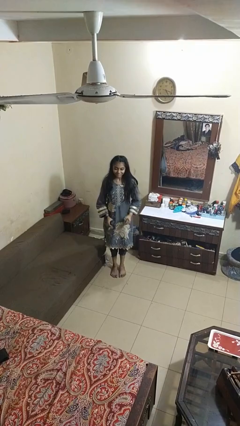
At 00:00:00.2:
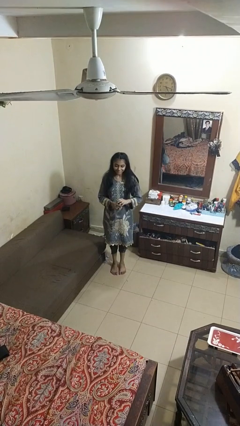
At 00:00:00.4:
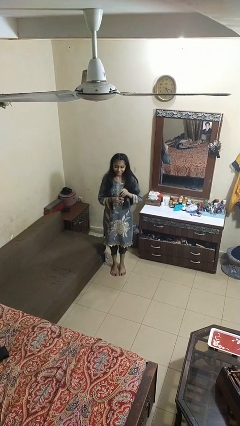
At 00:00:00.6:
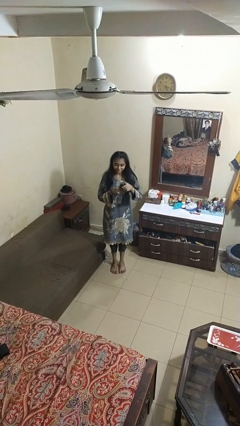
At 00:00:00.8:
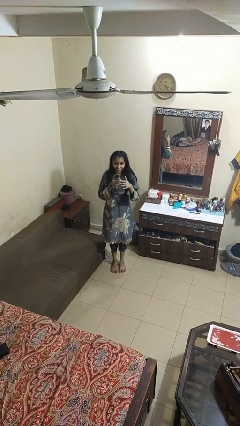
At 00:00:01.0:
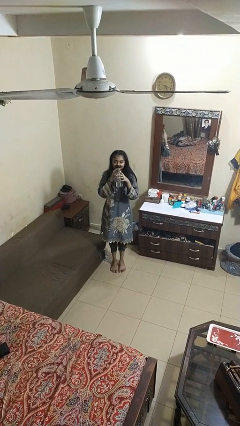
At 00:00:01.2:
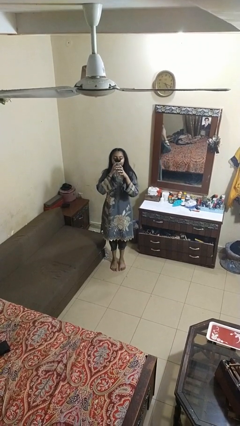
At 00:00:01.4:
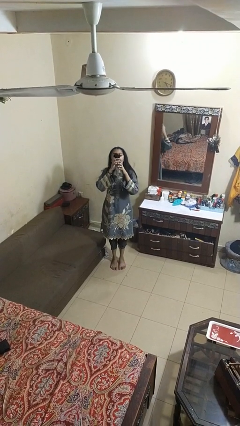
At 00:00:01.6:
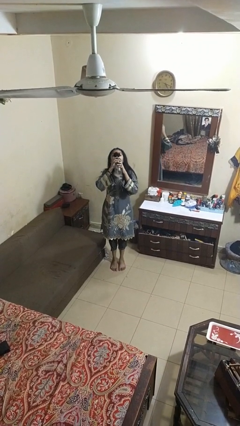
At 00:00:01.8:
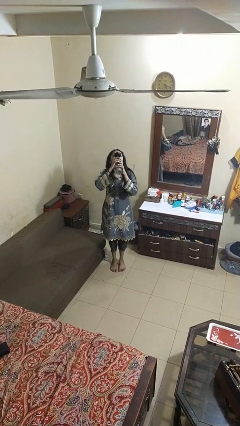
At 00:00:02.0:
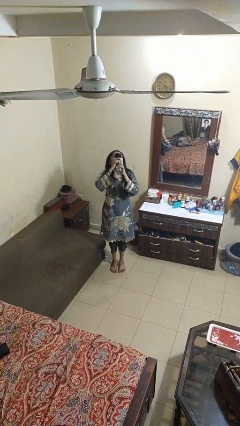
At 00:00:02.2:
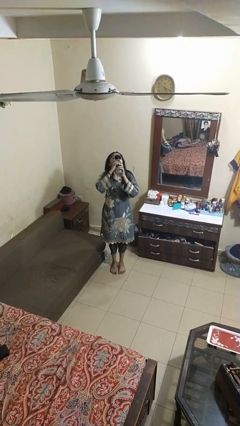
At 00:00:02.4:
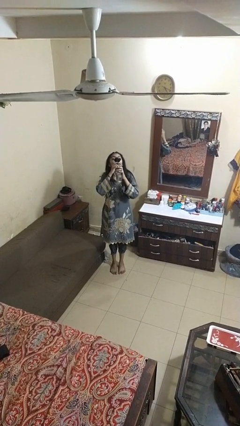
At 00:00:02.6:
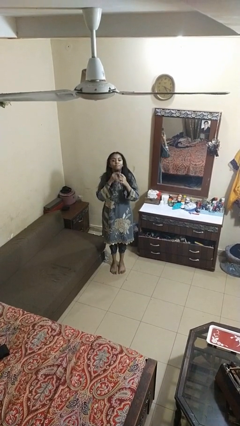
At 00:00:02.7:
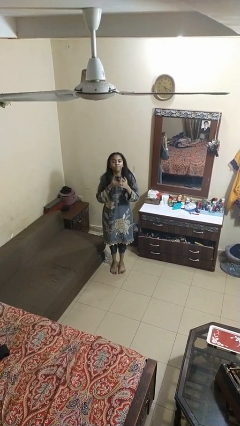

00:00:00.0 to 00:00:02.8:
person drinks from bottle

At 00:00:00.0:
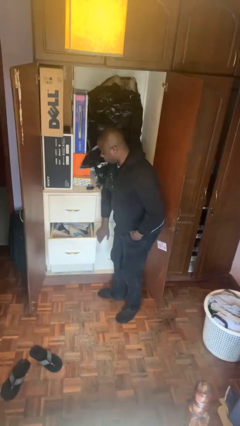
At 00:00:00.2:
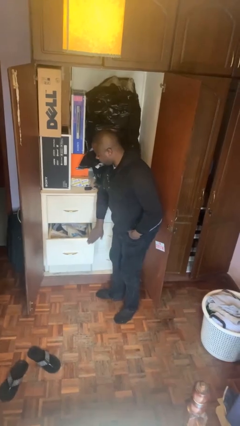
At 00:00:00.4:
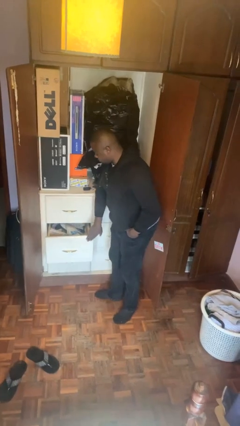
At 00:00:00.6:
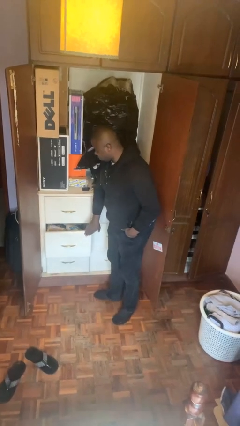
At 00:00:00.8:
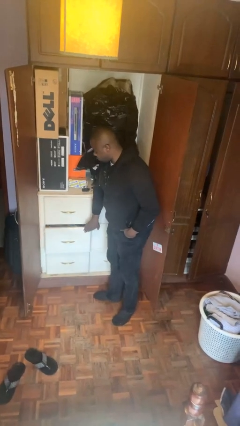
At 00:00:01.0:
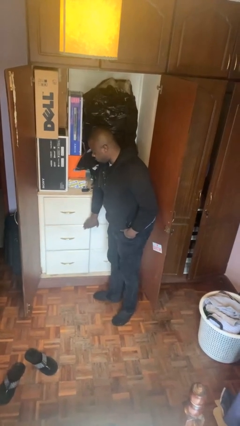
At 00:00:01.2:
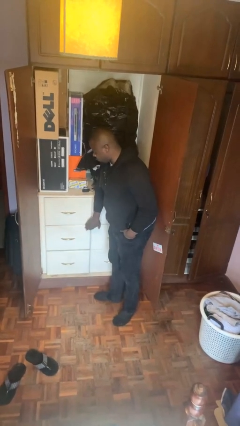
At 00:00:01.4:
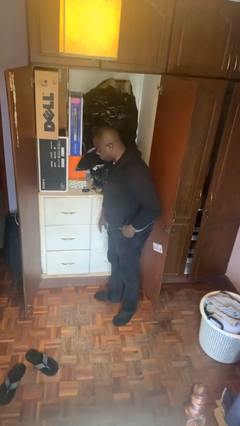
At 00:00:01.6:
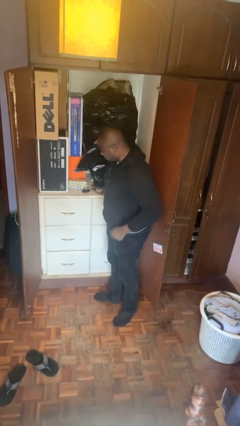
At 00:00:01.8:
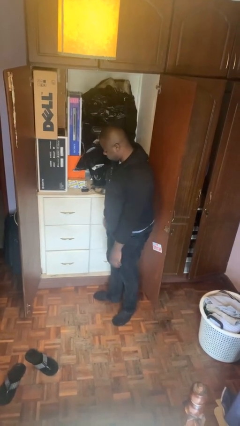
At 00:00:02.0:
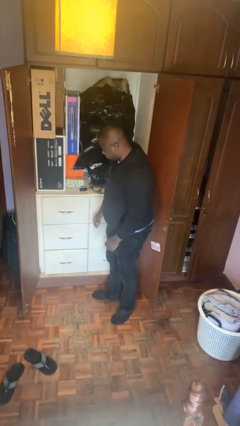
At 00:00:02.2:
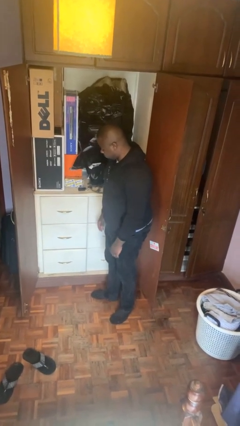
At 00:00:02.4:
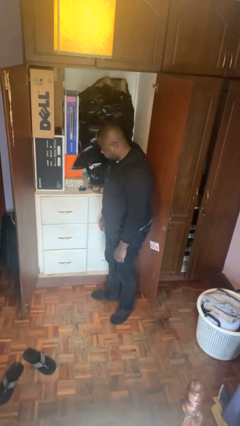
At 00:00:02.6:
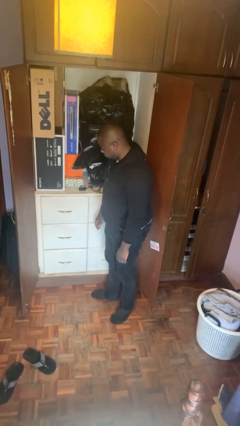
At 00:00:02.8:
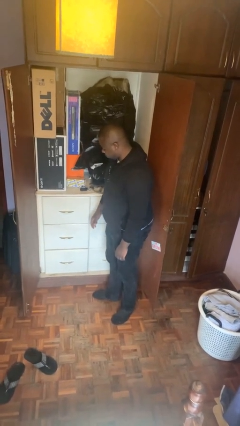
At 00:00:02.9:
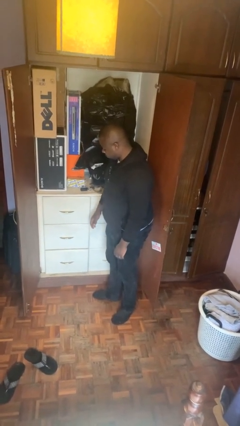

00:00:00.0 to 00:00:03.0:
person closes dresser drawer

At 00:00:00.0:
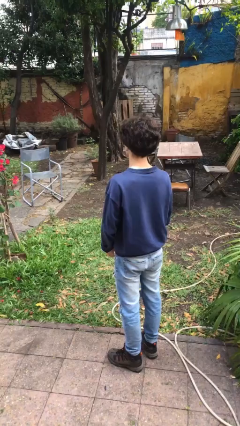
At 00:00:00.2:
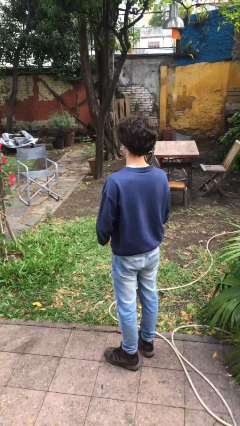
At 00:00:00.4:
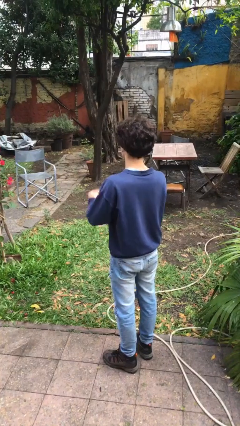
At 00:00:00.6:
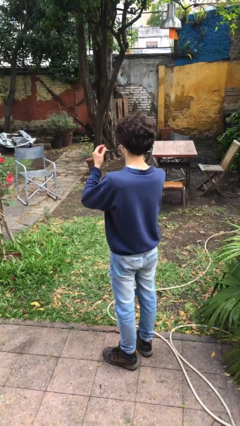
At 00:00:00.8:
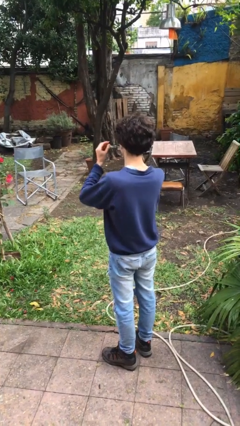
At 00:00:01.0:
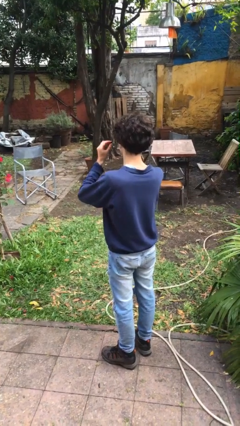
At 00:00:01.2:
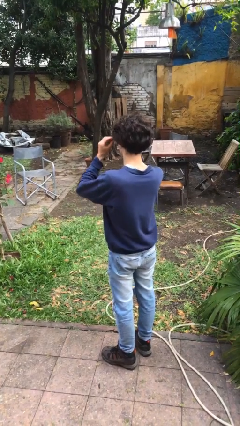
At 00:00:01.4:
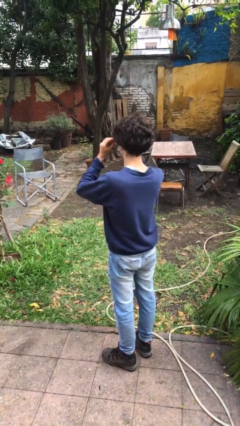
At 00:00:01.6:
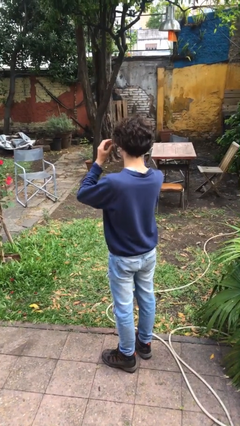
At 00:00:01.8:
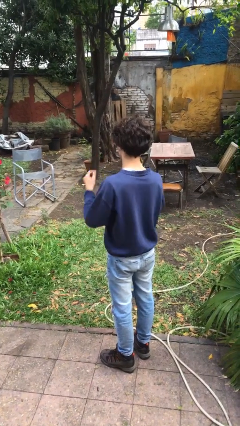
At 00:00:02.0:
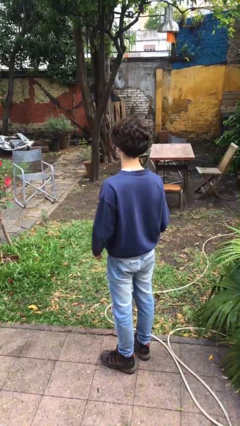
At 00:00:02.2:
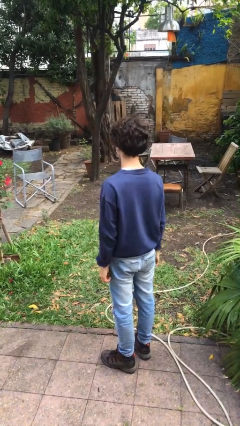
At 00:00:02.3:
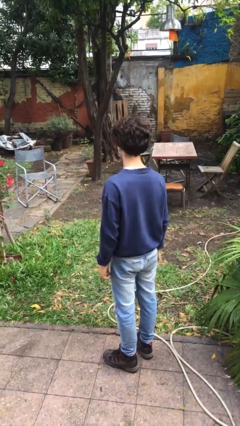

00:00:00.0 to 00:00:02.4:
person puts on glasses

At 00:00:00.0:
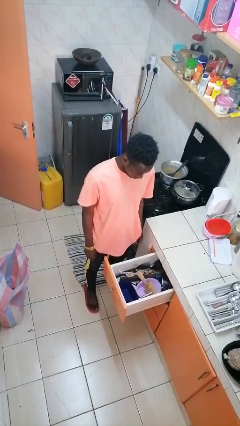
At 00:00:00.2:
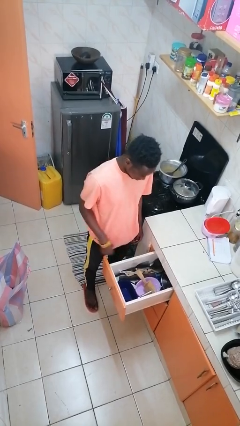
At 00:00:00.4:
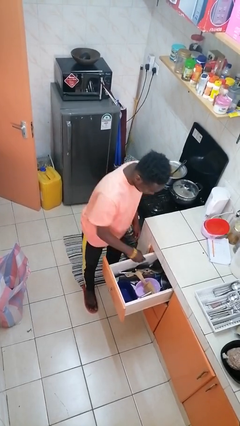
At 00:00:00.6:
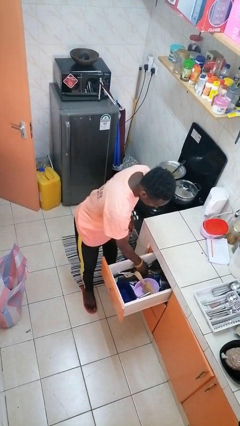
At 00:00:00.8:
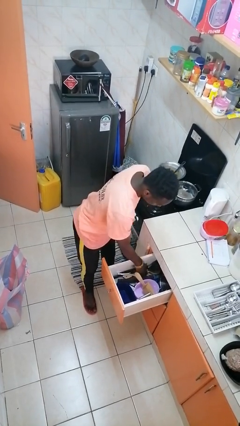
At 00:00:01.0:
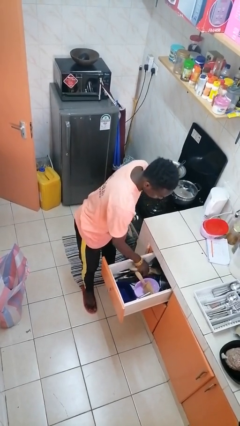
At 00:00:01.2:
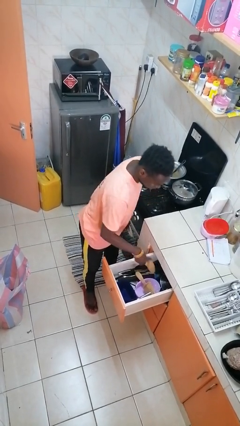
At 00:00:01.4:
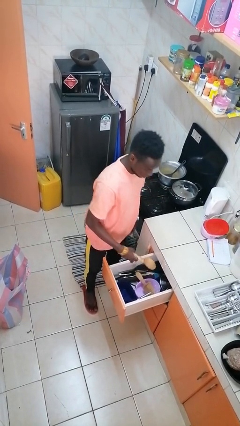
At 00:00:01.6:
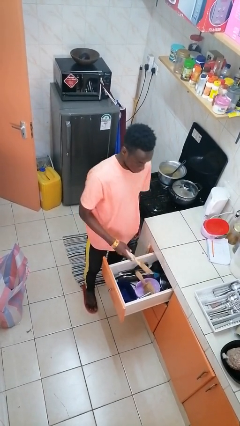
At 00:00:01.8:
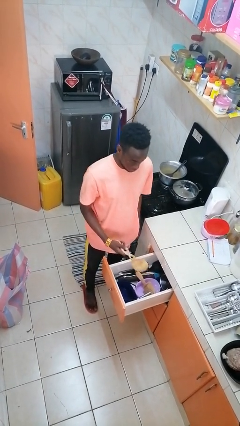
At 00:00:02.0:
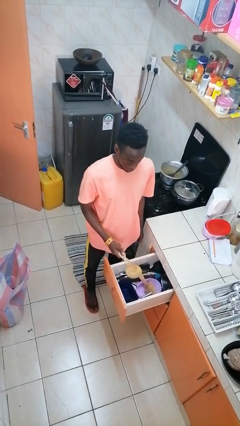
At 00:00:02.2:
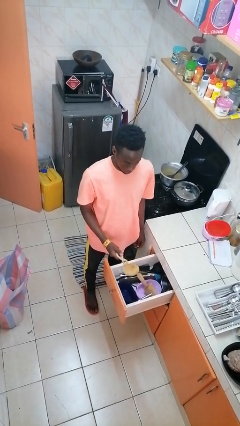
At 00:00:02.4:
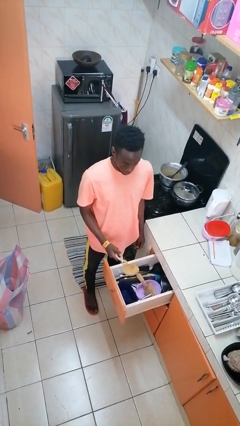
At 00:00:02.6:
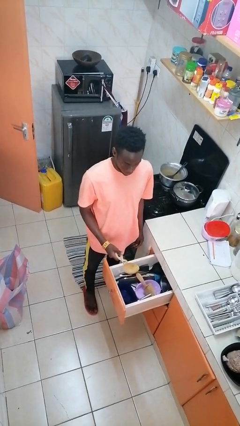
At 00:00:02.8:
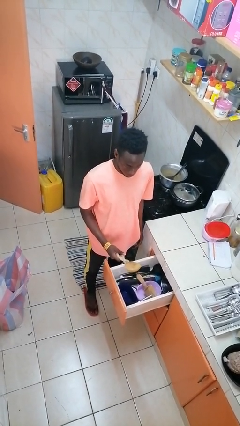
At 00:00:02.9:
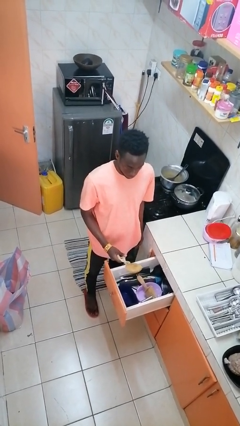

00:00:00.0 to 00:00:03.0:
person takes object from kitchen drawer

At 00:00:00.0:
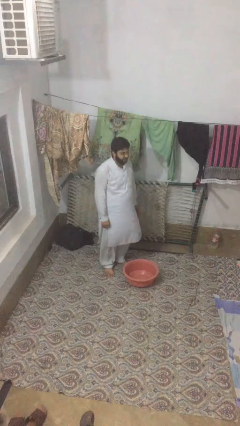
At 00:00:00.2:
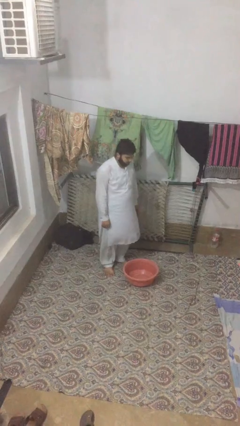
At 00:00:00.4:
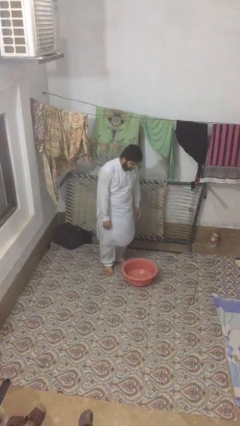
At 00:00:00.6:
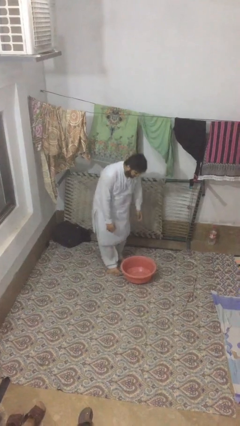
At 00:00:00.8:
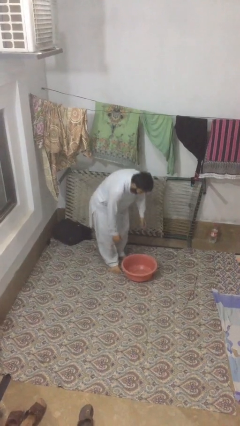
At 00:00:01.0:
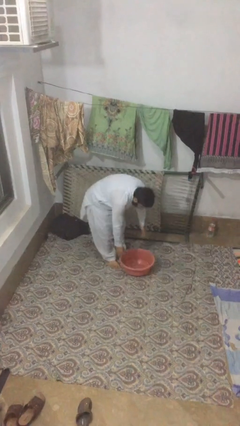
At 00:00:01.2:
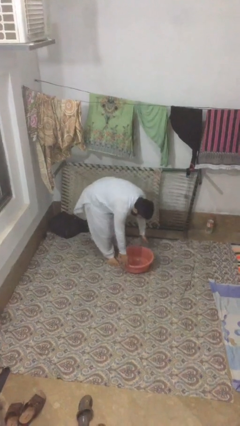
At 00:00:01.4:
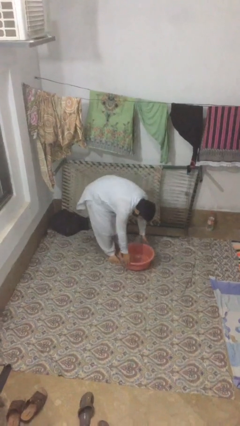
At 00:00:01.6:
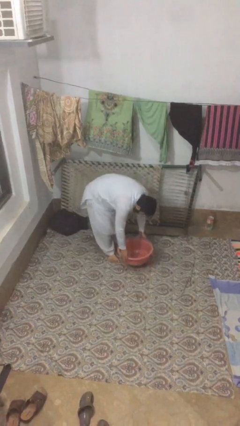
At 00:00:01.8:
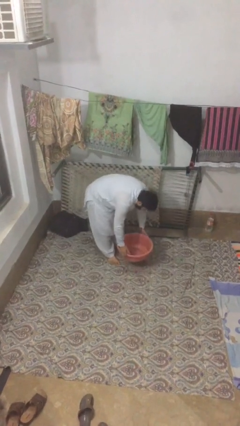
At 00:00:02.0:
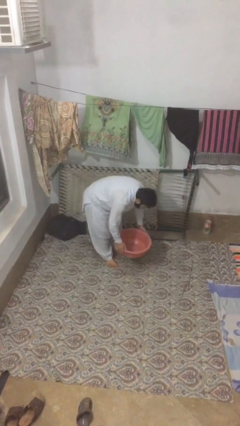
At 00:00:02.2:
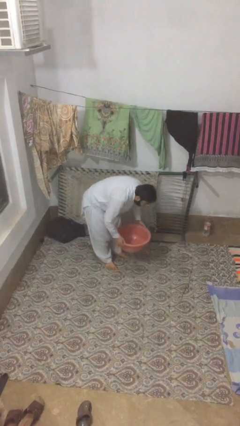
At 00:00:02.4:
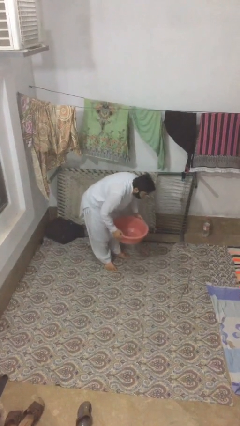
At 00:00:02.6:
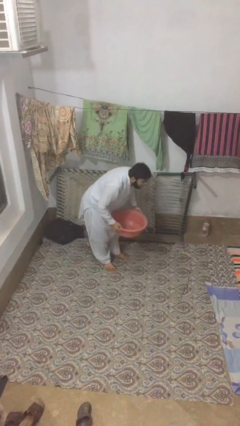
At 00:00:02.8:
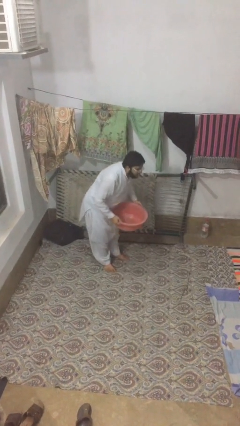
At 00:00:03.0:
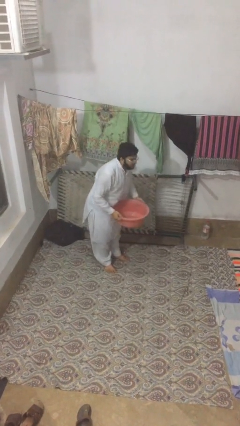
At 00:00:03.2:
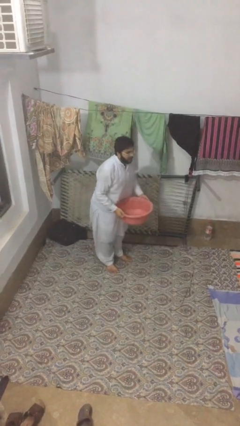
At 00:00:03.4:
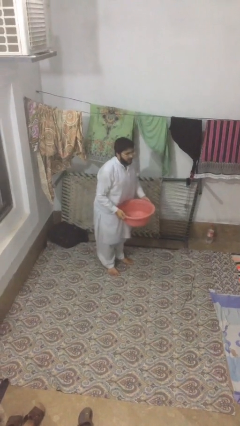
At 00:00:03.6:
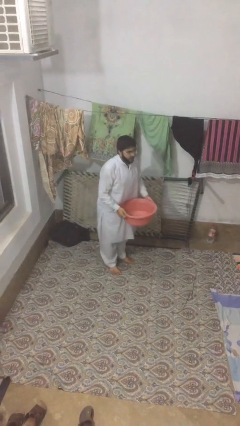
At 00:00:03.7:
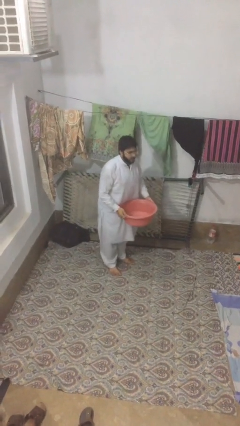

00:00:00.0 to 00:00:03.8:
person picks up object from floor

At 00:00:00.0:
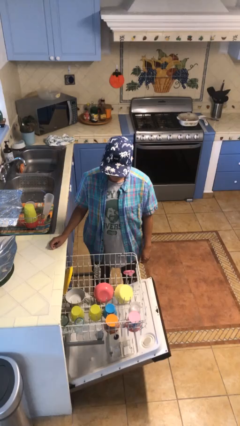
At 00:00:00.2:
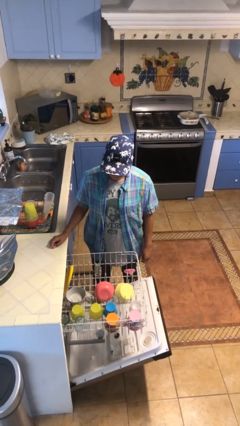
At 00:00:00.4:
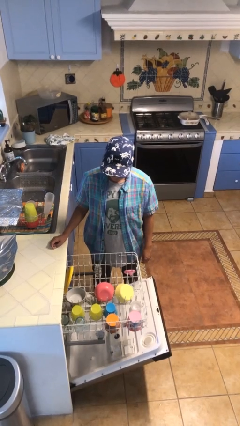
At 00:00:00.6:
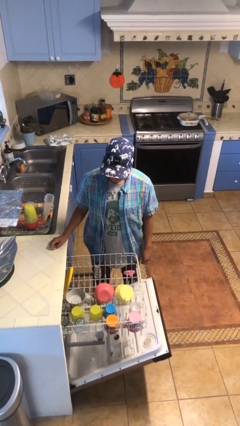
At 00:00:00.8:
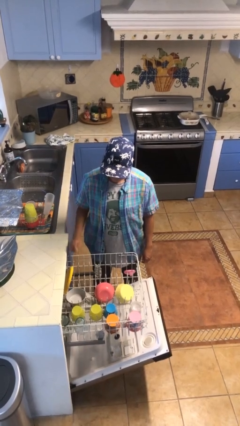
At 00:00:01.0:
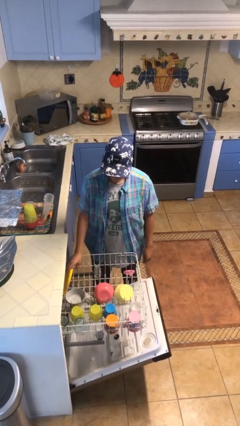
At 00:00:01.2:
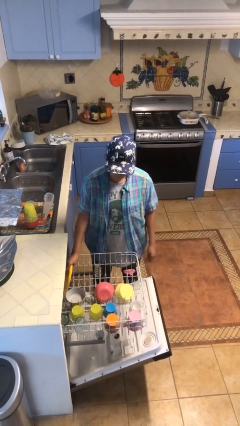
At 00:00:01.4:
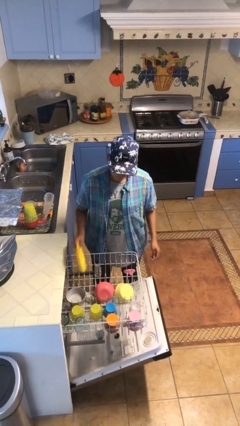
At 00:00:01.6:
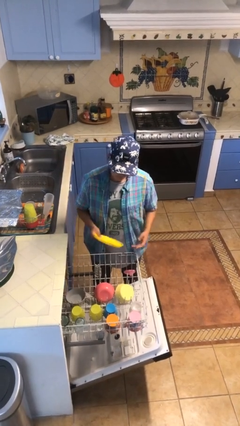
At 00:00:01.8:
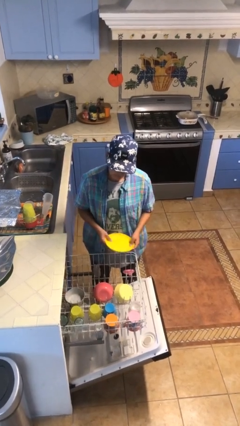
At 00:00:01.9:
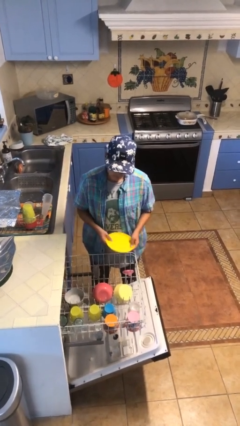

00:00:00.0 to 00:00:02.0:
person unloads dishwasher

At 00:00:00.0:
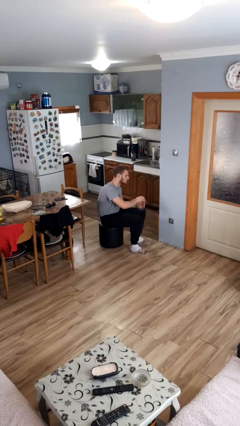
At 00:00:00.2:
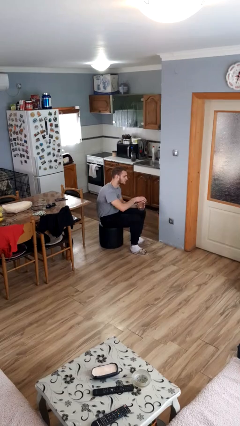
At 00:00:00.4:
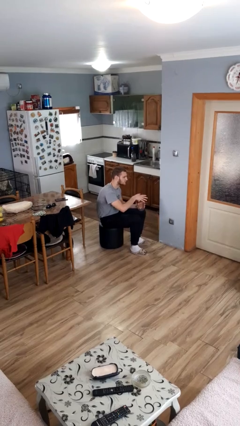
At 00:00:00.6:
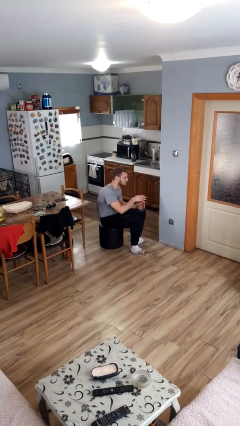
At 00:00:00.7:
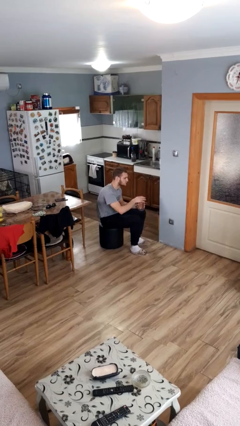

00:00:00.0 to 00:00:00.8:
person closes jar
